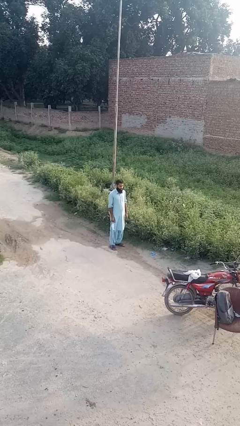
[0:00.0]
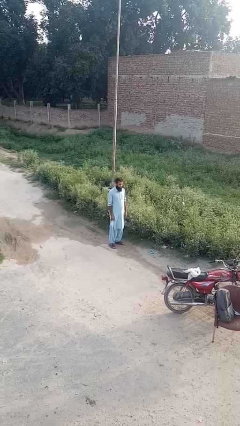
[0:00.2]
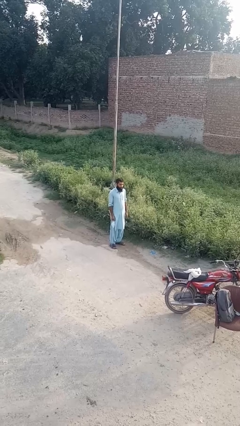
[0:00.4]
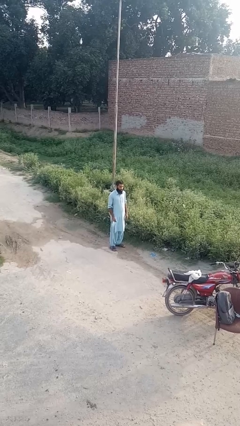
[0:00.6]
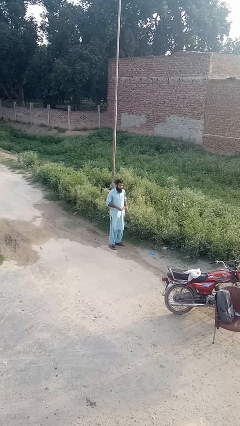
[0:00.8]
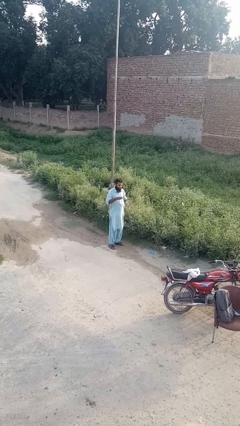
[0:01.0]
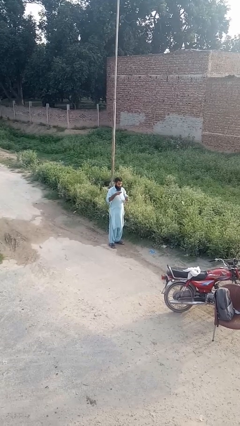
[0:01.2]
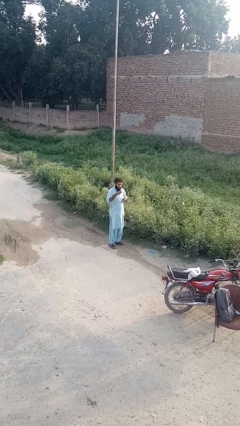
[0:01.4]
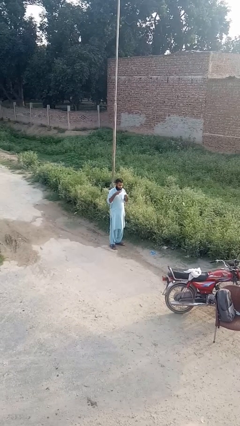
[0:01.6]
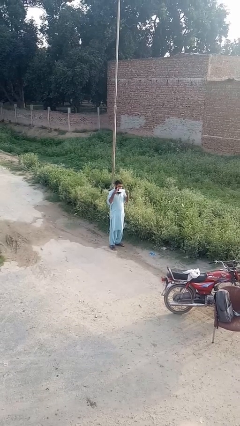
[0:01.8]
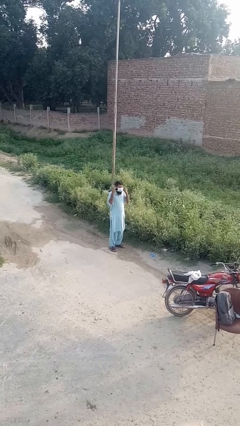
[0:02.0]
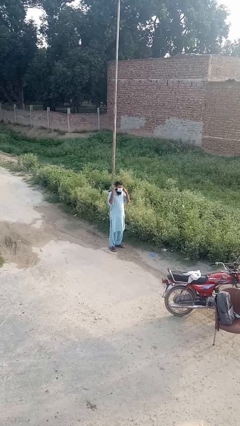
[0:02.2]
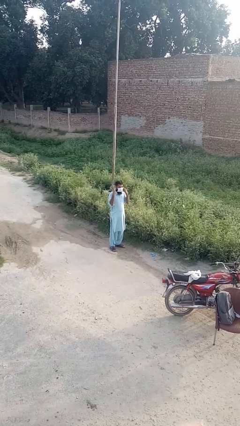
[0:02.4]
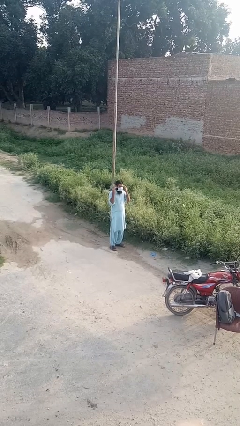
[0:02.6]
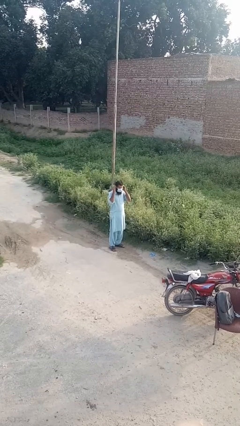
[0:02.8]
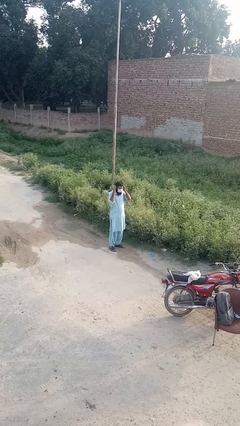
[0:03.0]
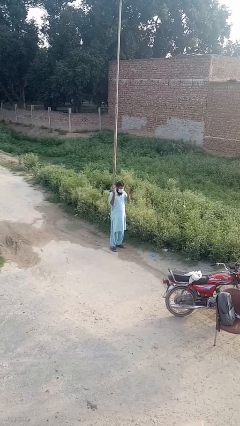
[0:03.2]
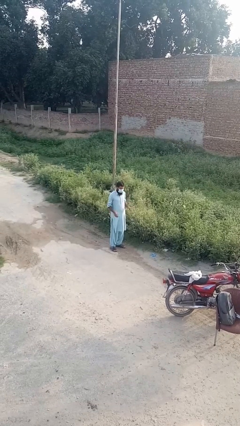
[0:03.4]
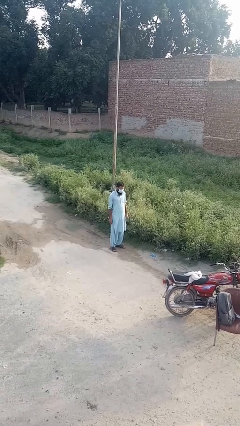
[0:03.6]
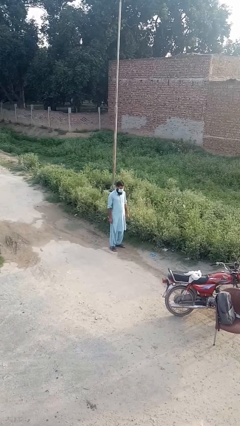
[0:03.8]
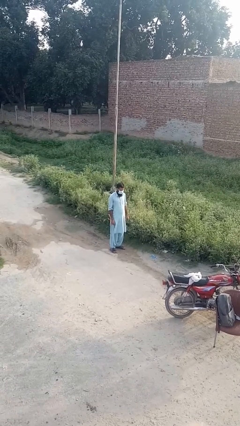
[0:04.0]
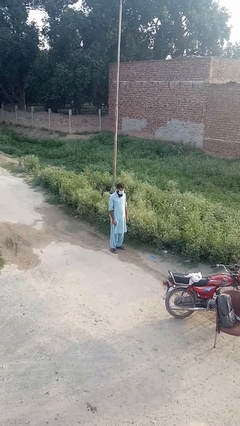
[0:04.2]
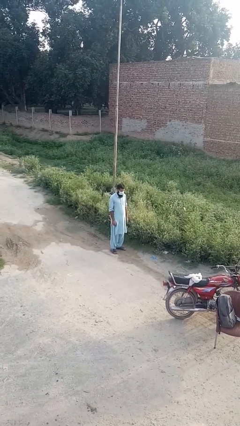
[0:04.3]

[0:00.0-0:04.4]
person puts on facemask

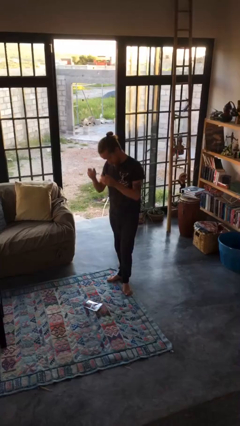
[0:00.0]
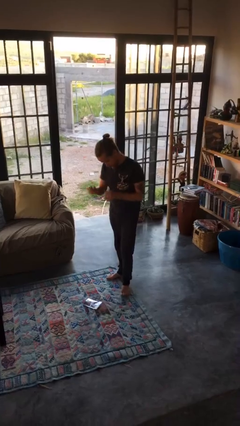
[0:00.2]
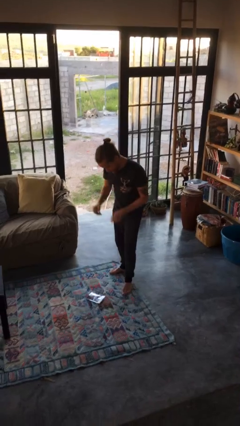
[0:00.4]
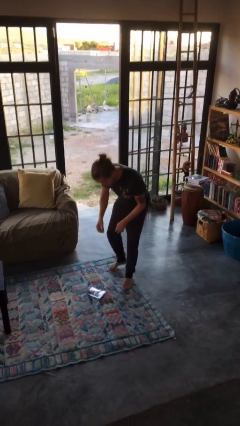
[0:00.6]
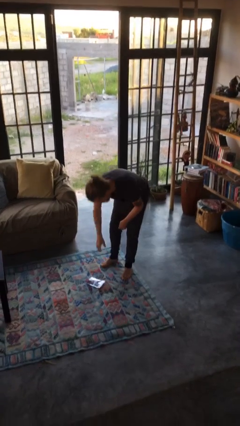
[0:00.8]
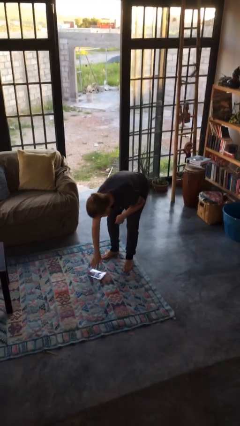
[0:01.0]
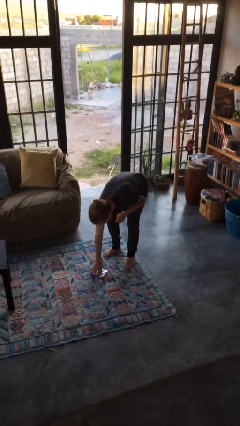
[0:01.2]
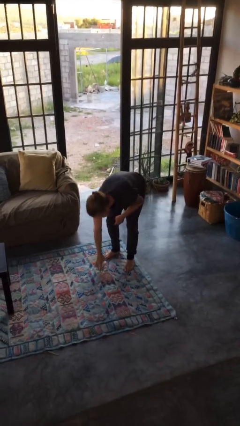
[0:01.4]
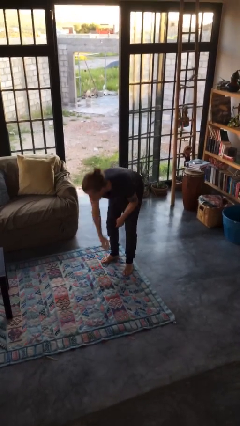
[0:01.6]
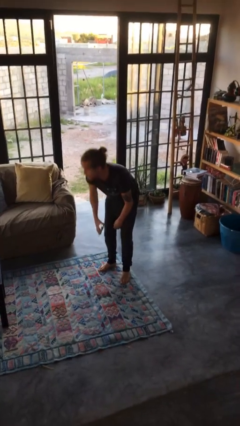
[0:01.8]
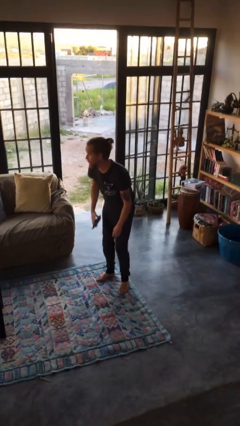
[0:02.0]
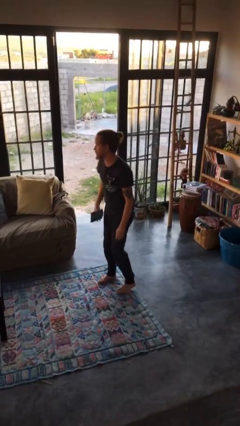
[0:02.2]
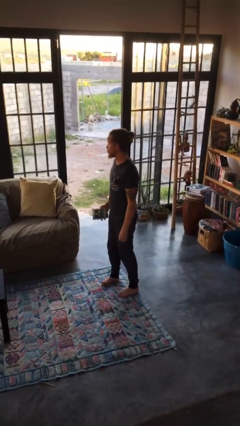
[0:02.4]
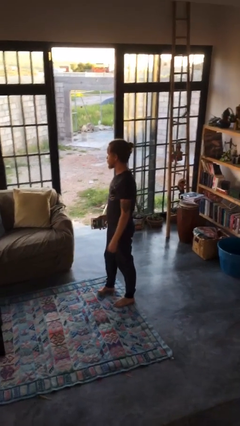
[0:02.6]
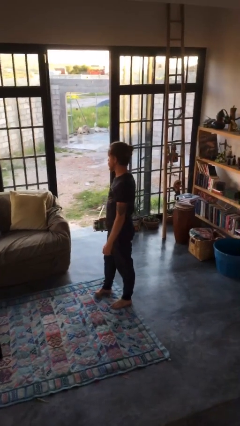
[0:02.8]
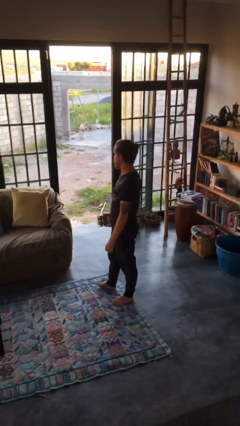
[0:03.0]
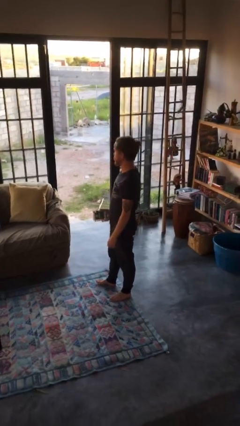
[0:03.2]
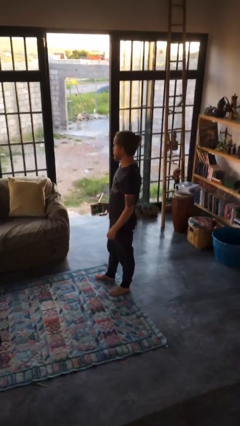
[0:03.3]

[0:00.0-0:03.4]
person picks up object from floor

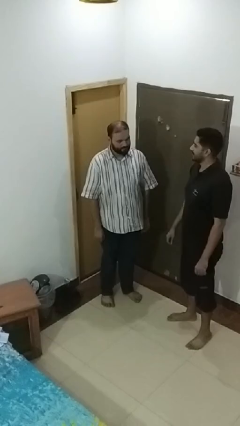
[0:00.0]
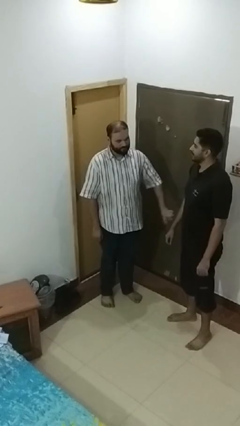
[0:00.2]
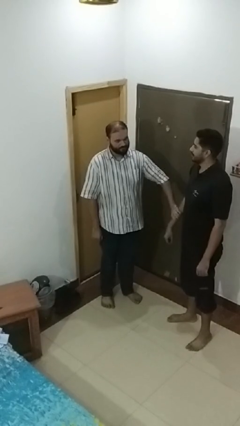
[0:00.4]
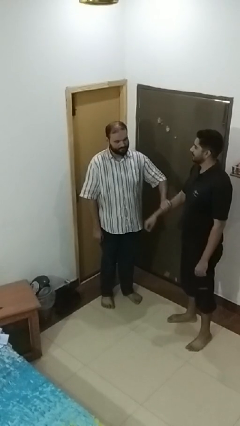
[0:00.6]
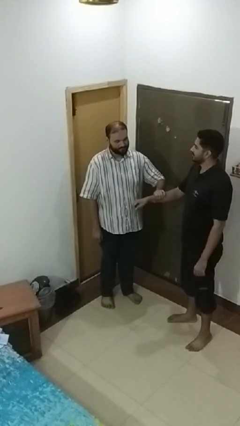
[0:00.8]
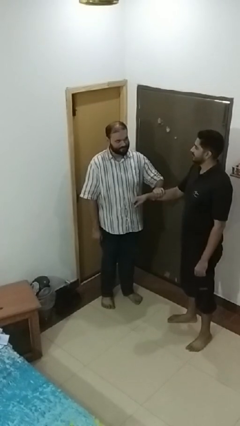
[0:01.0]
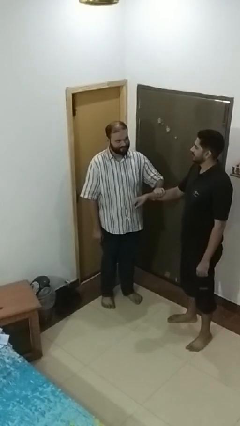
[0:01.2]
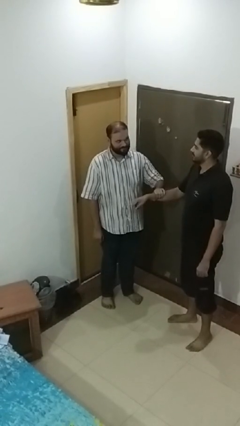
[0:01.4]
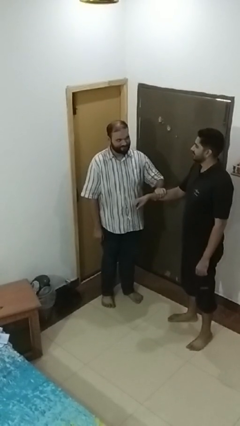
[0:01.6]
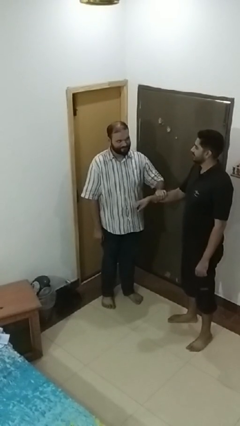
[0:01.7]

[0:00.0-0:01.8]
person grabs person by forearm

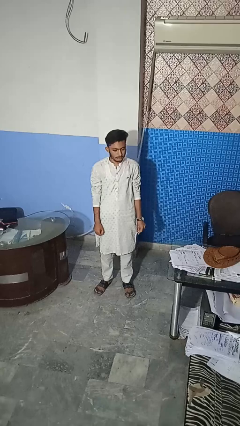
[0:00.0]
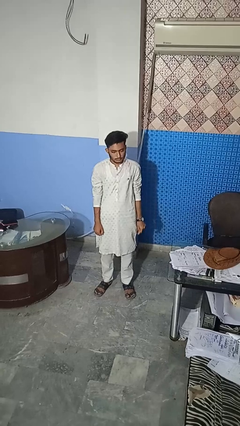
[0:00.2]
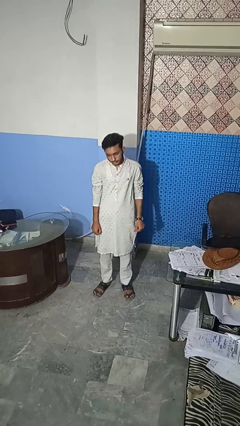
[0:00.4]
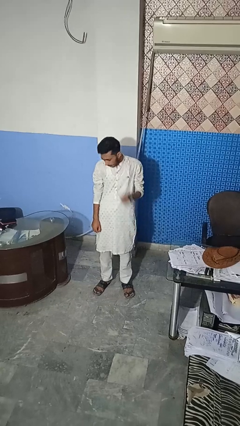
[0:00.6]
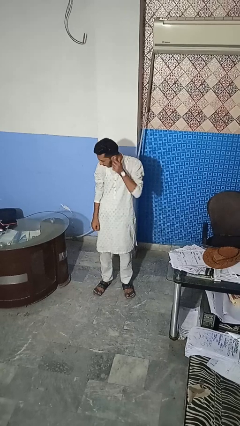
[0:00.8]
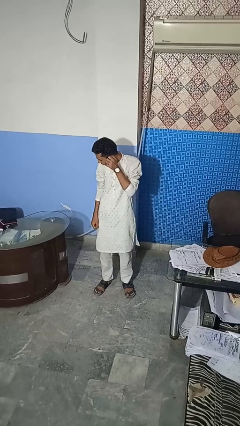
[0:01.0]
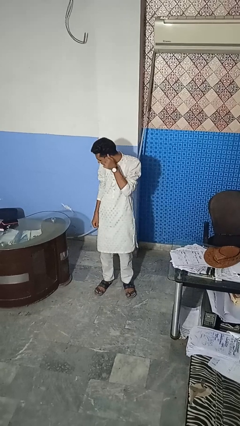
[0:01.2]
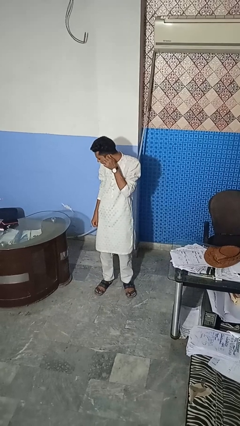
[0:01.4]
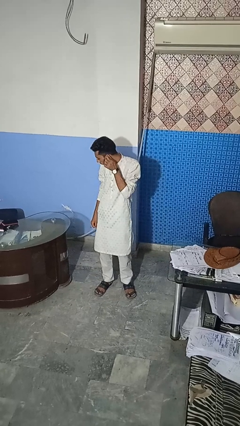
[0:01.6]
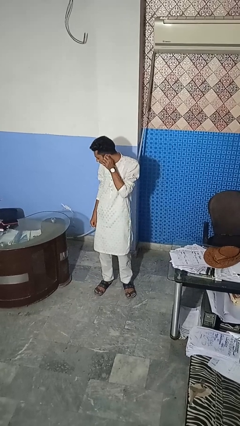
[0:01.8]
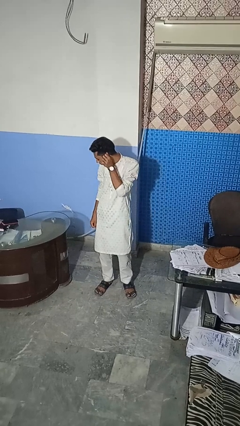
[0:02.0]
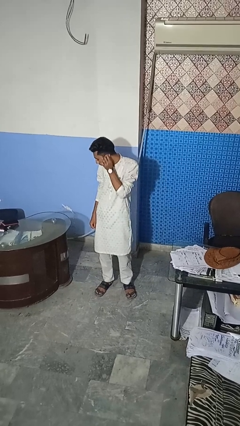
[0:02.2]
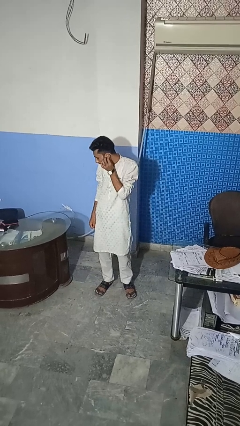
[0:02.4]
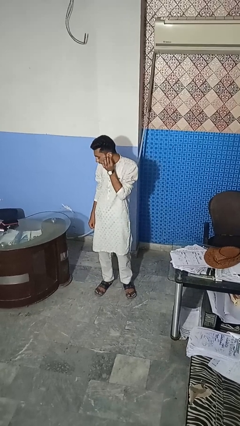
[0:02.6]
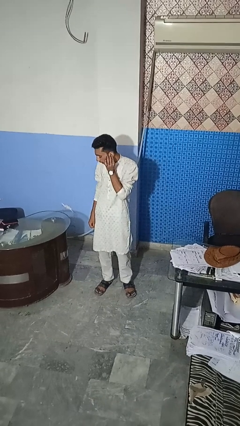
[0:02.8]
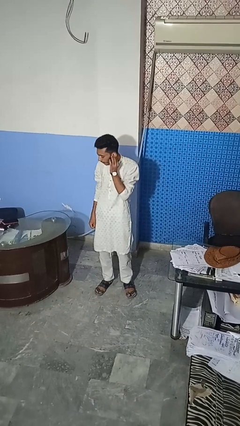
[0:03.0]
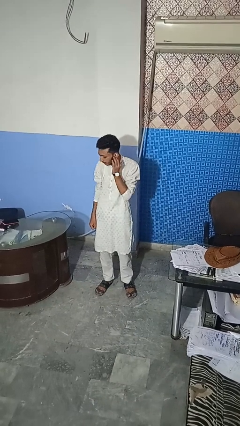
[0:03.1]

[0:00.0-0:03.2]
person touches earlobe

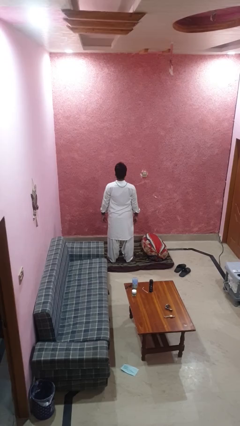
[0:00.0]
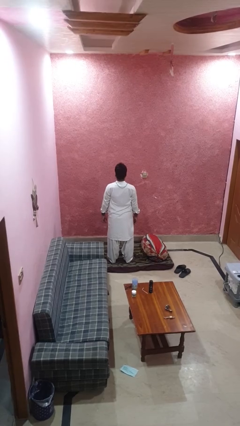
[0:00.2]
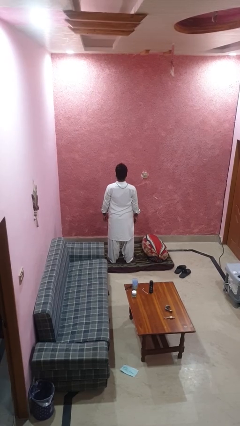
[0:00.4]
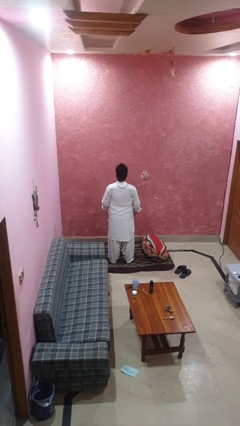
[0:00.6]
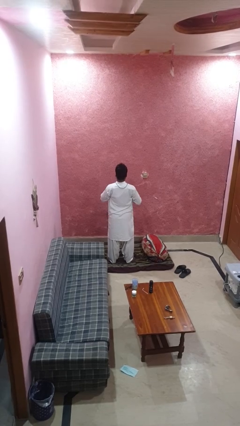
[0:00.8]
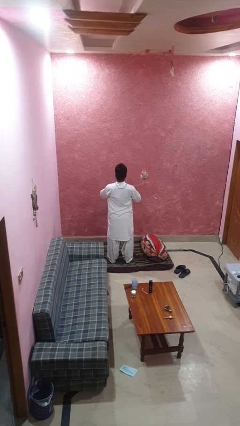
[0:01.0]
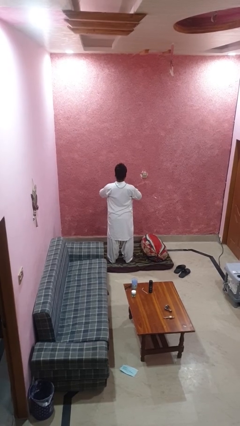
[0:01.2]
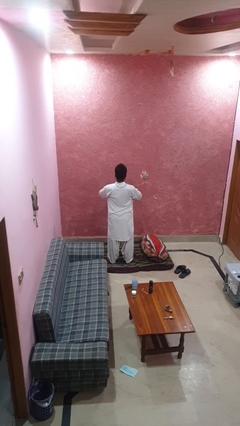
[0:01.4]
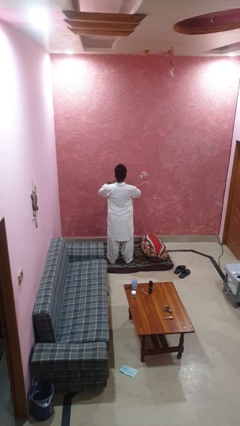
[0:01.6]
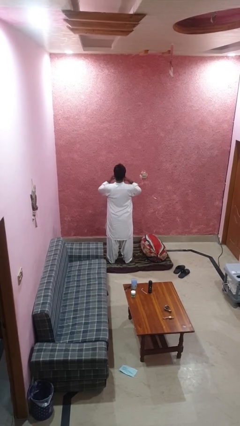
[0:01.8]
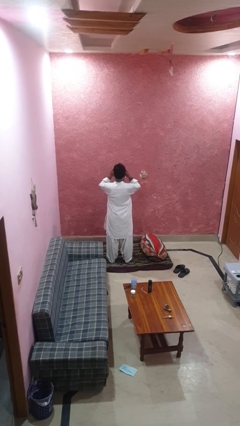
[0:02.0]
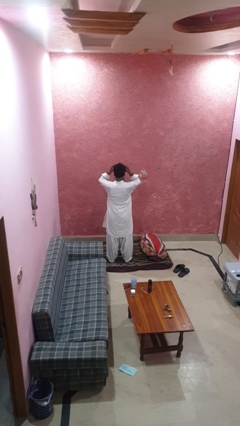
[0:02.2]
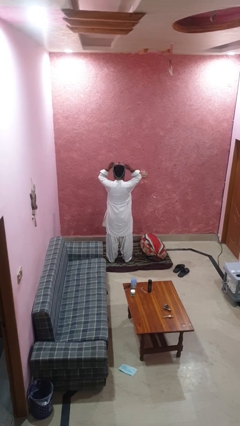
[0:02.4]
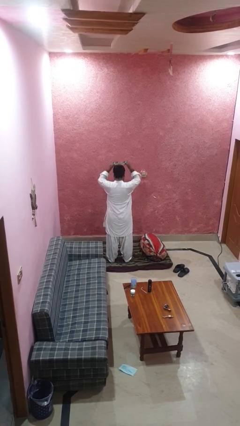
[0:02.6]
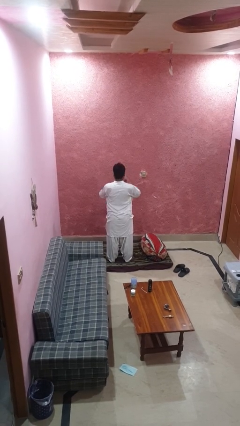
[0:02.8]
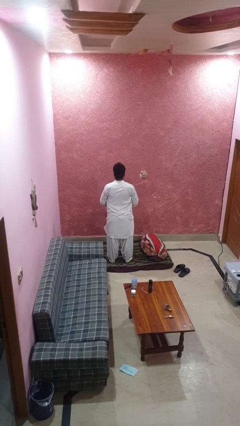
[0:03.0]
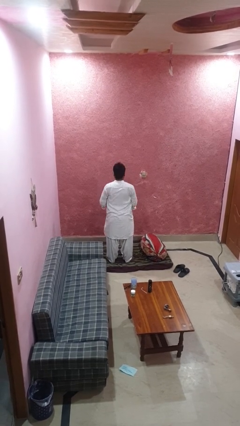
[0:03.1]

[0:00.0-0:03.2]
person takes off necklace

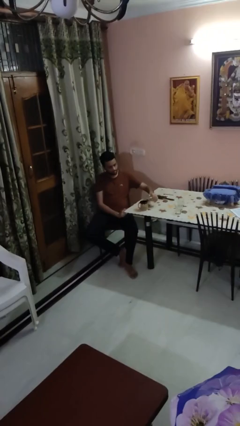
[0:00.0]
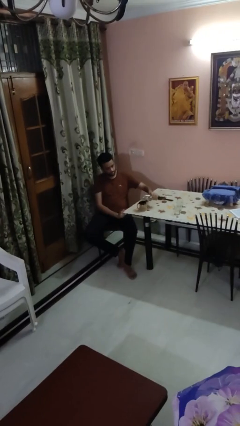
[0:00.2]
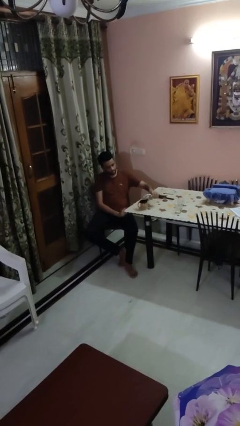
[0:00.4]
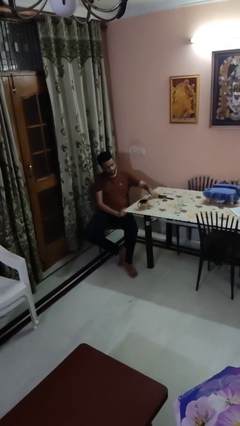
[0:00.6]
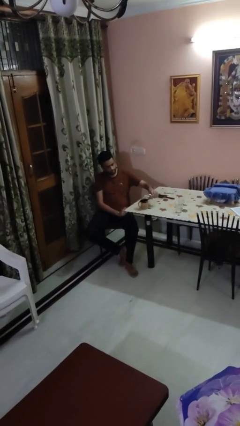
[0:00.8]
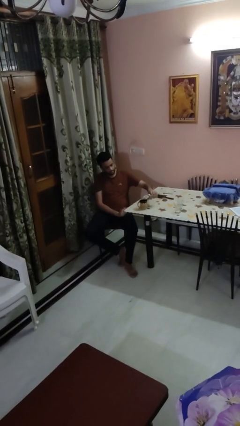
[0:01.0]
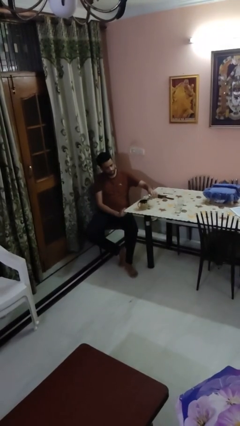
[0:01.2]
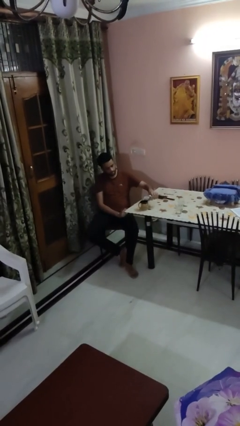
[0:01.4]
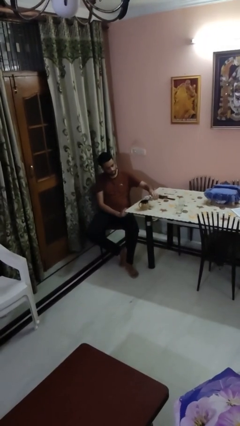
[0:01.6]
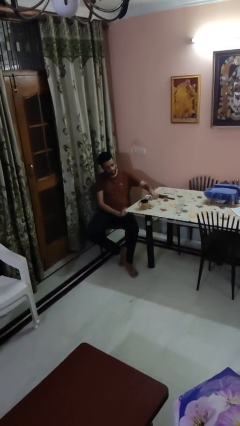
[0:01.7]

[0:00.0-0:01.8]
person pours liquid into cup
